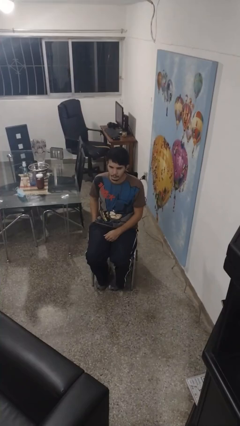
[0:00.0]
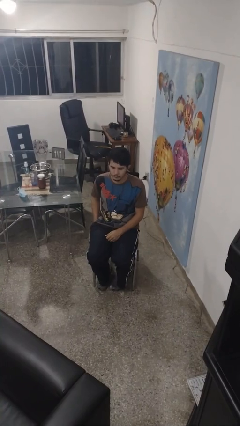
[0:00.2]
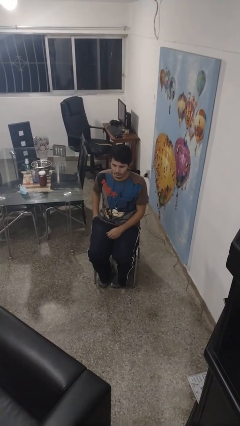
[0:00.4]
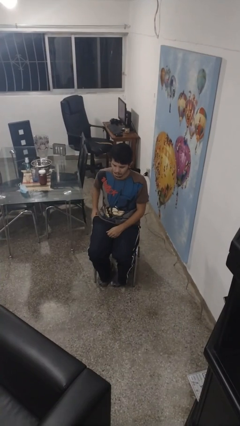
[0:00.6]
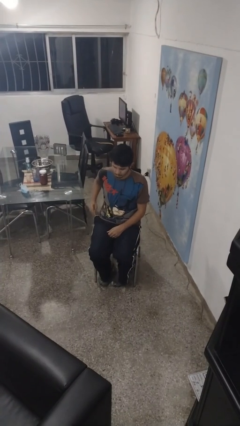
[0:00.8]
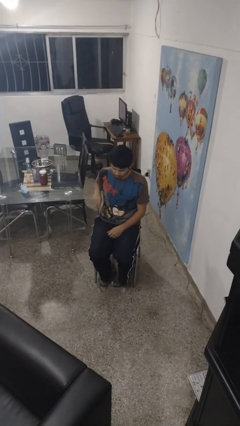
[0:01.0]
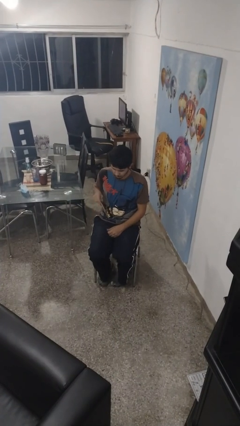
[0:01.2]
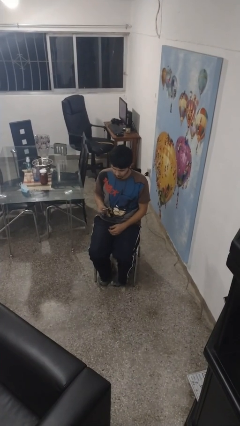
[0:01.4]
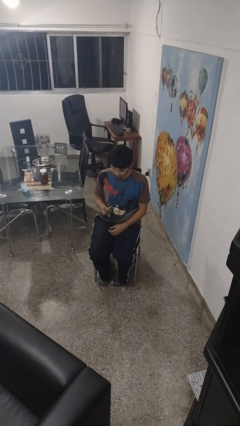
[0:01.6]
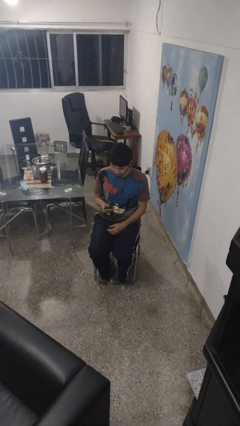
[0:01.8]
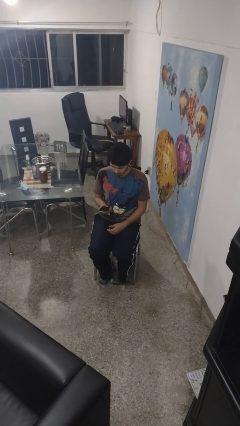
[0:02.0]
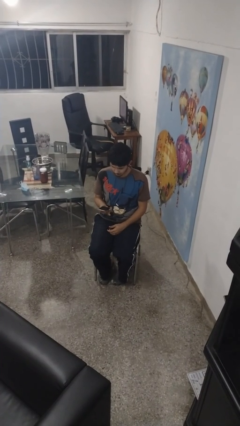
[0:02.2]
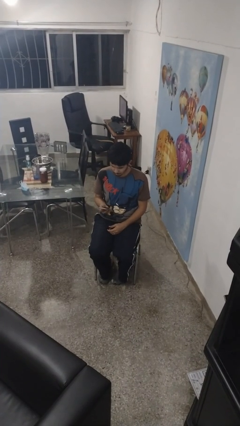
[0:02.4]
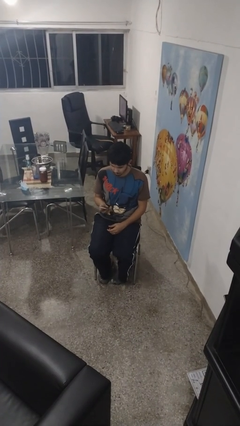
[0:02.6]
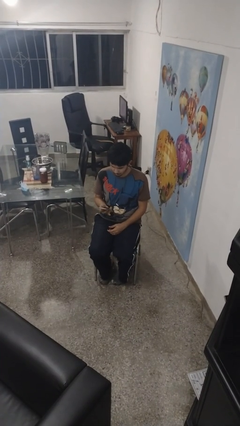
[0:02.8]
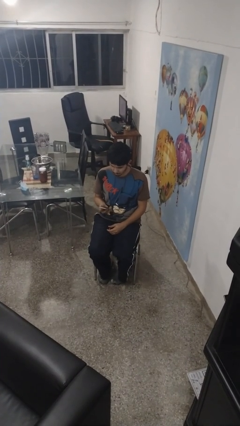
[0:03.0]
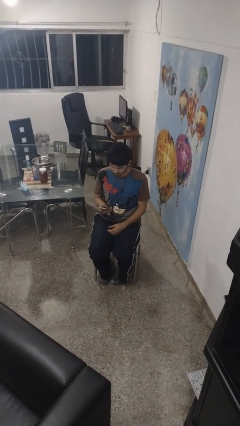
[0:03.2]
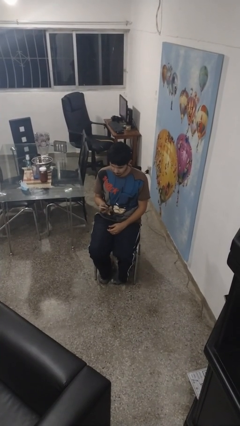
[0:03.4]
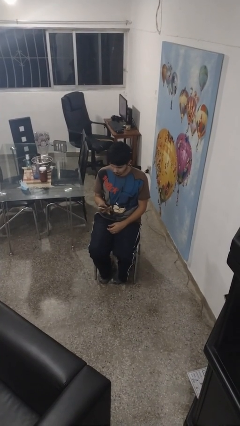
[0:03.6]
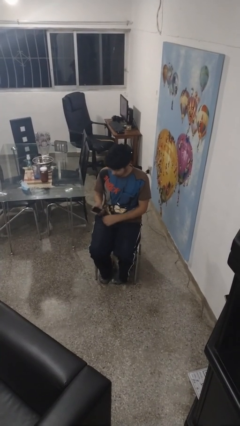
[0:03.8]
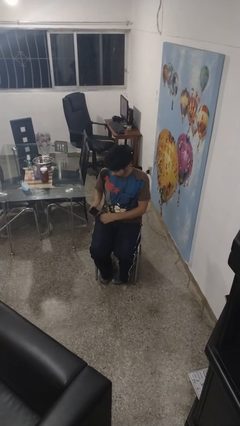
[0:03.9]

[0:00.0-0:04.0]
person takes phone from pocket

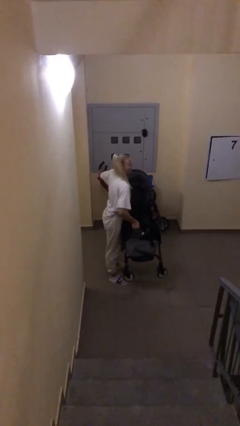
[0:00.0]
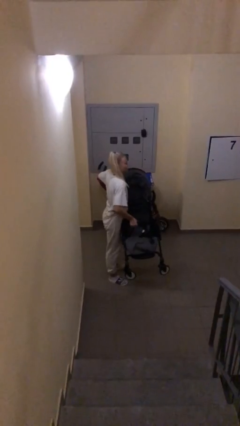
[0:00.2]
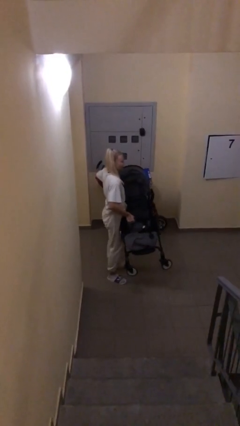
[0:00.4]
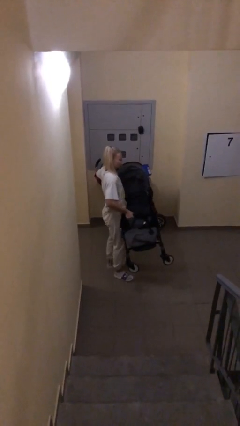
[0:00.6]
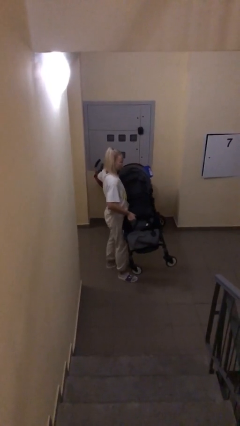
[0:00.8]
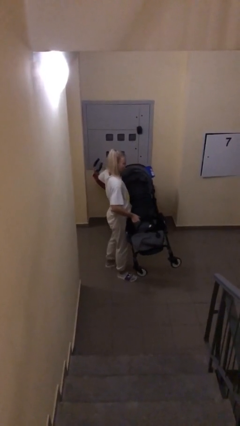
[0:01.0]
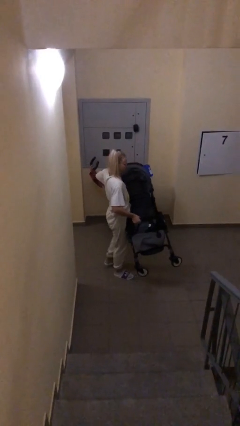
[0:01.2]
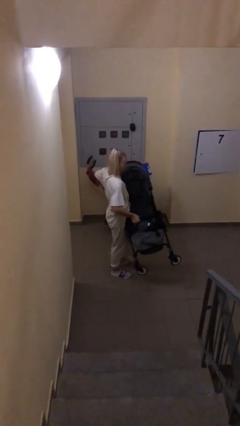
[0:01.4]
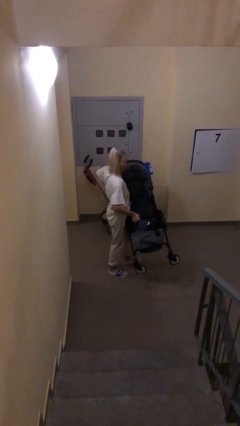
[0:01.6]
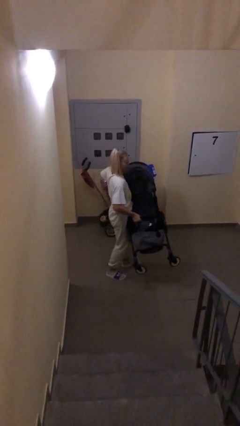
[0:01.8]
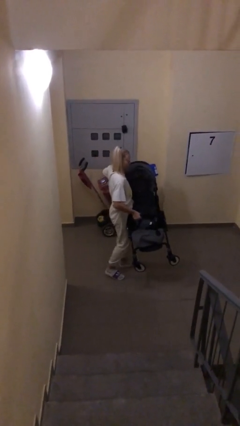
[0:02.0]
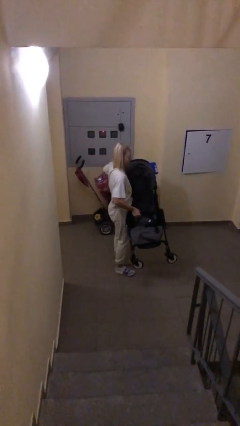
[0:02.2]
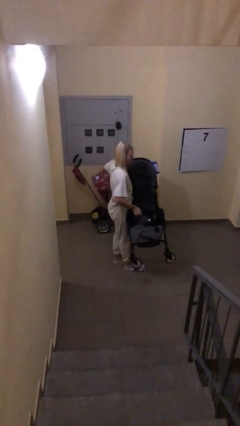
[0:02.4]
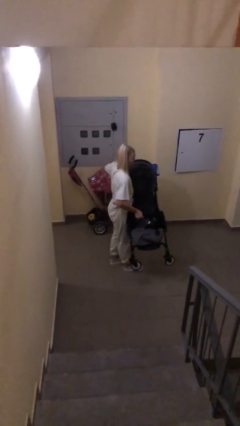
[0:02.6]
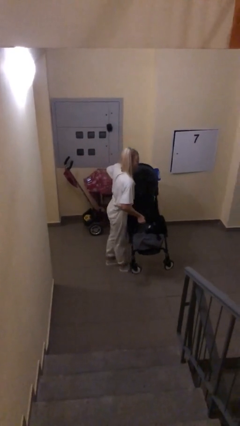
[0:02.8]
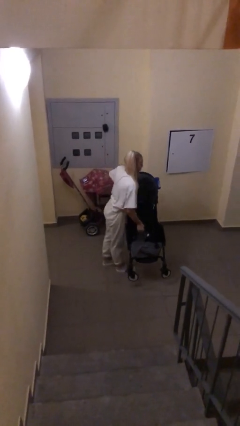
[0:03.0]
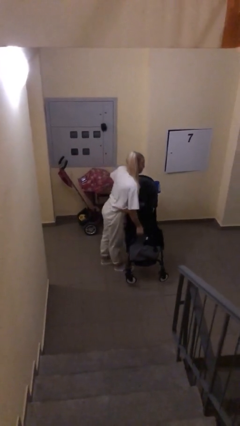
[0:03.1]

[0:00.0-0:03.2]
person carries heavy object

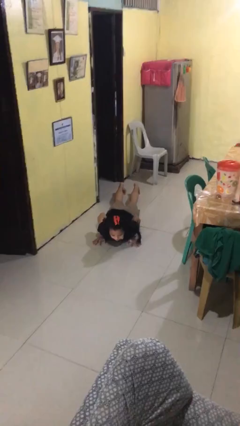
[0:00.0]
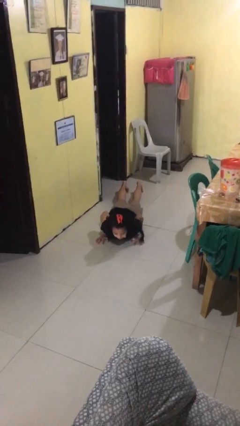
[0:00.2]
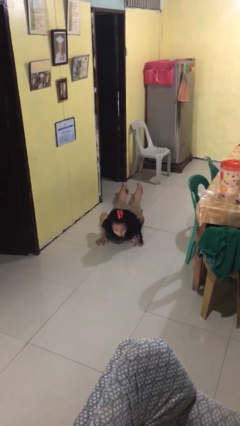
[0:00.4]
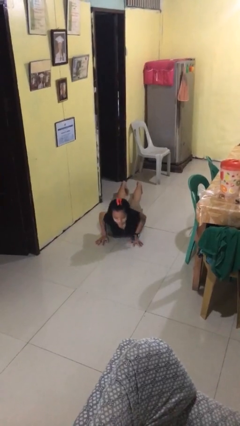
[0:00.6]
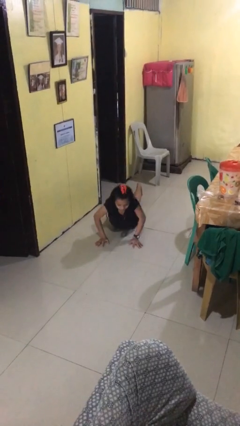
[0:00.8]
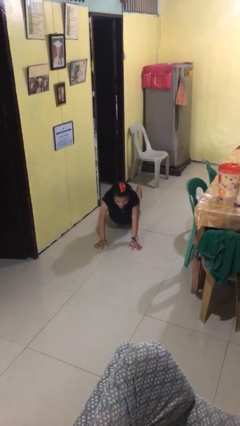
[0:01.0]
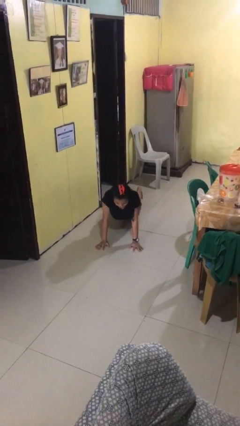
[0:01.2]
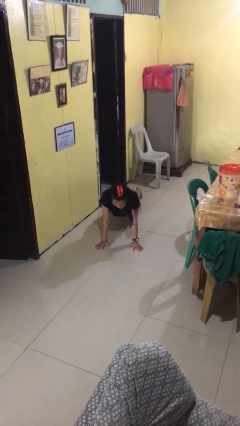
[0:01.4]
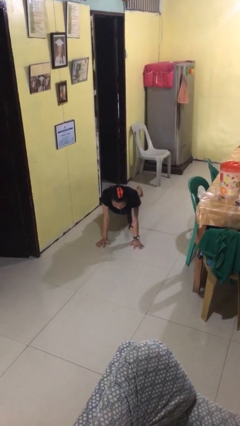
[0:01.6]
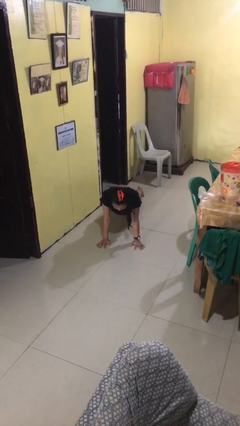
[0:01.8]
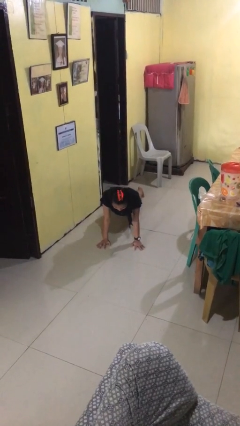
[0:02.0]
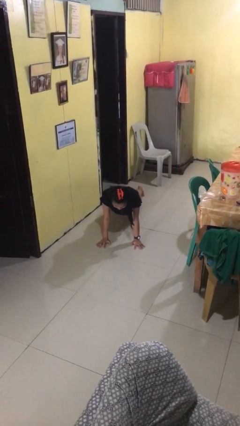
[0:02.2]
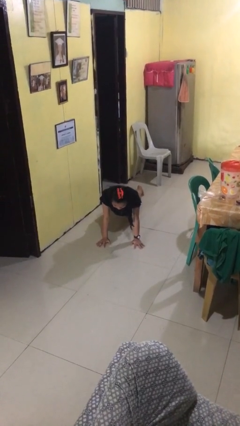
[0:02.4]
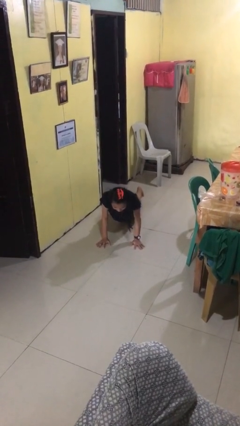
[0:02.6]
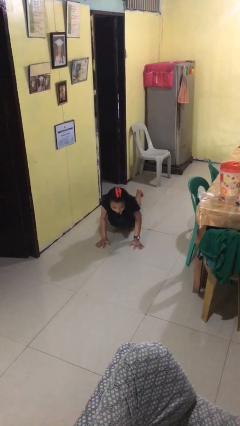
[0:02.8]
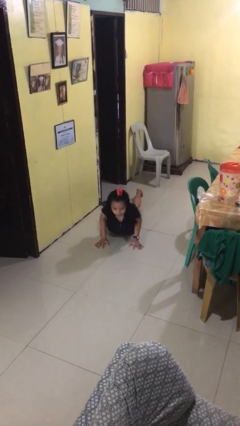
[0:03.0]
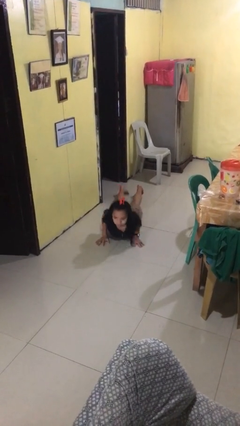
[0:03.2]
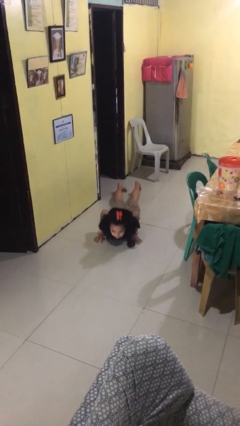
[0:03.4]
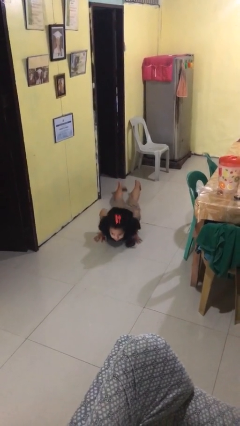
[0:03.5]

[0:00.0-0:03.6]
person exercises with pushup

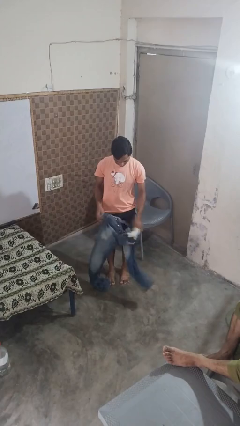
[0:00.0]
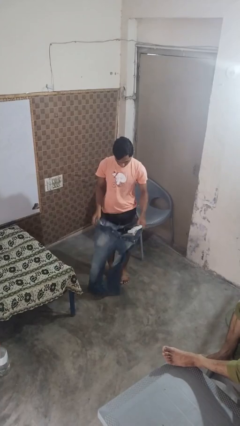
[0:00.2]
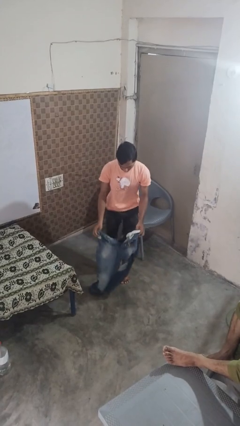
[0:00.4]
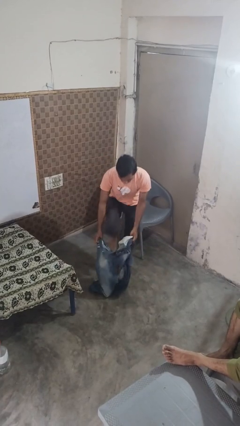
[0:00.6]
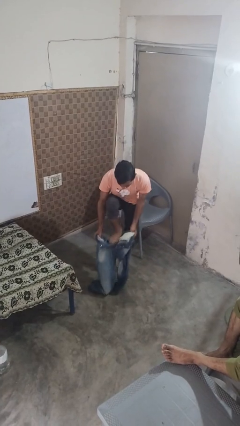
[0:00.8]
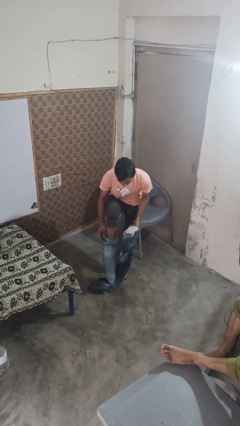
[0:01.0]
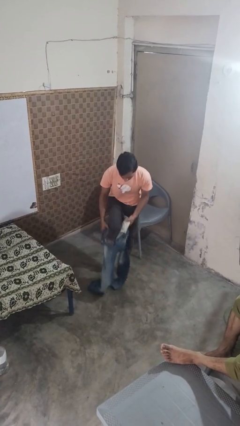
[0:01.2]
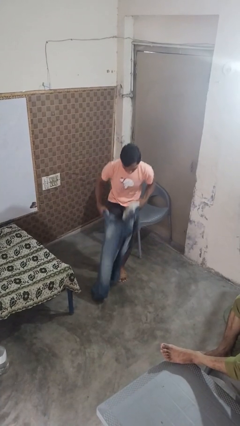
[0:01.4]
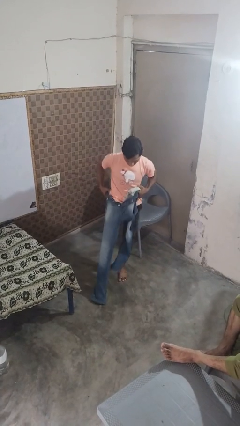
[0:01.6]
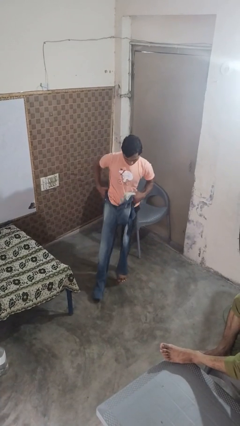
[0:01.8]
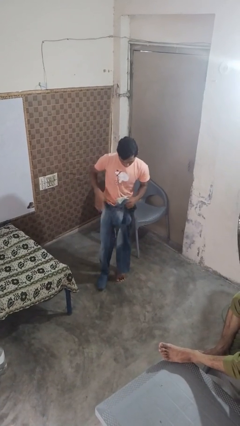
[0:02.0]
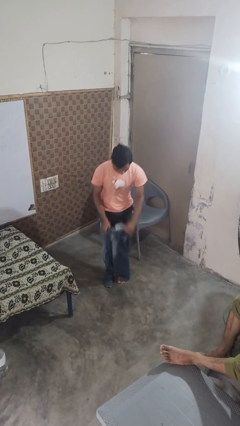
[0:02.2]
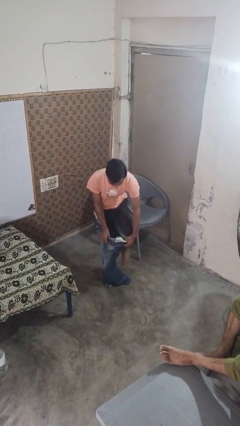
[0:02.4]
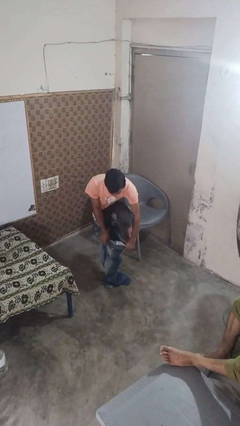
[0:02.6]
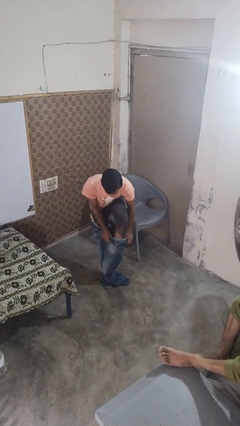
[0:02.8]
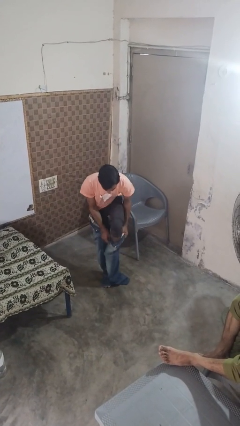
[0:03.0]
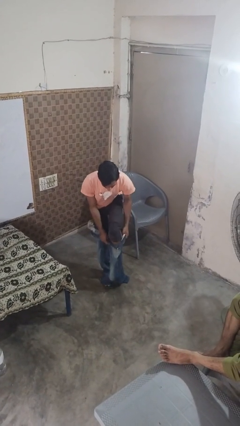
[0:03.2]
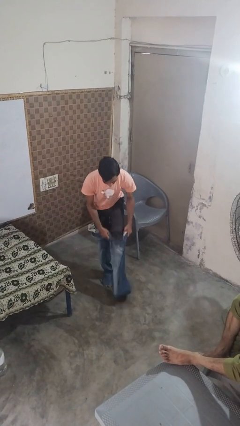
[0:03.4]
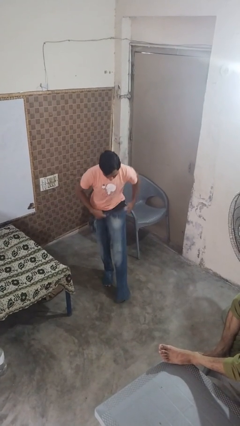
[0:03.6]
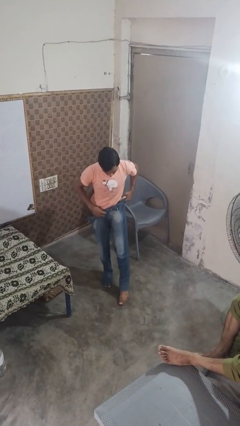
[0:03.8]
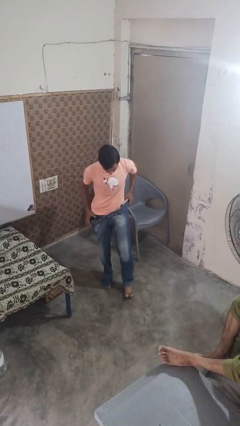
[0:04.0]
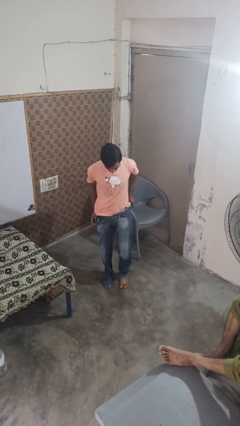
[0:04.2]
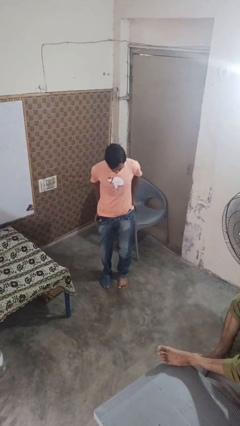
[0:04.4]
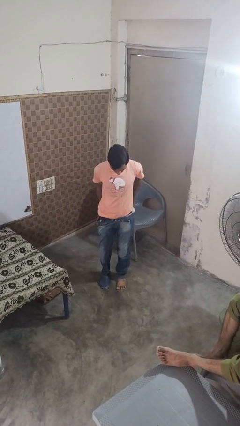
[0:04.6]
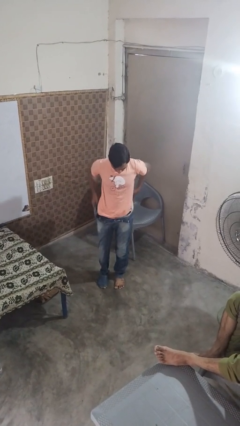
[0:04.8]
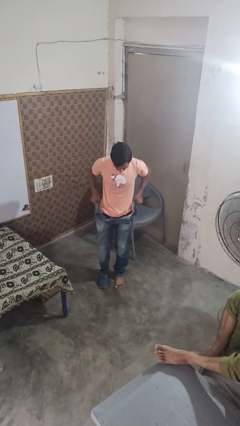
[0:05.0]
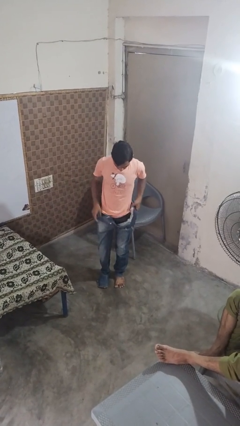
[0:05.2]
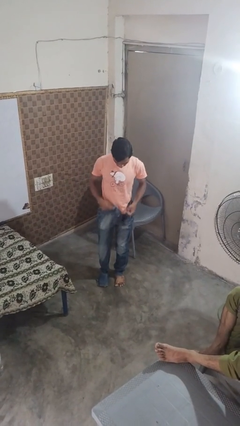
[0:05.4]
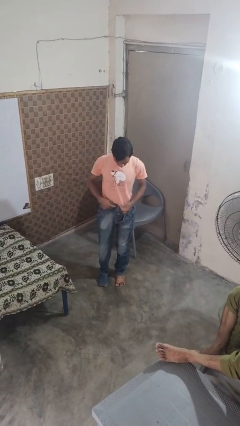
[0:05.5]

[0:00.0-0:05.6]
person puts on pants

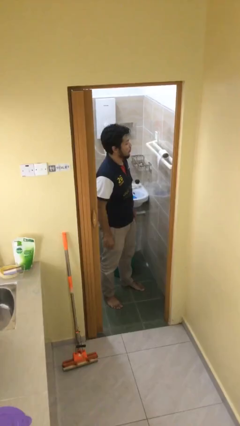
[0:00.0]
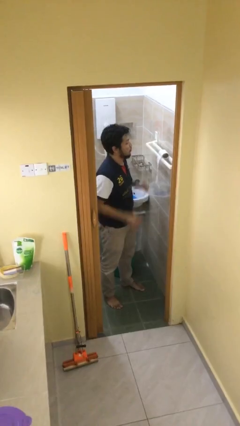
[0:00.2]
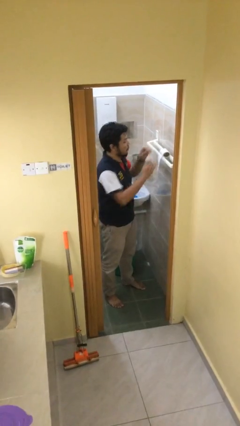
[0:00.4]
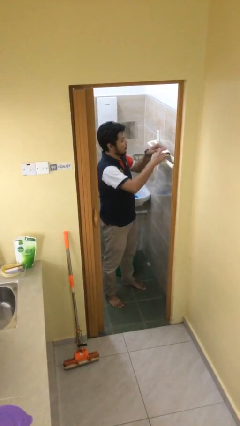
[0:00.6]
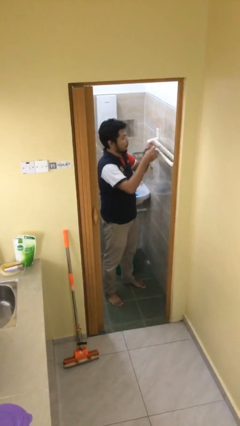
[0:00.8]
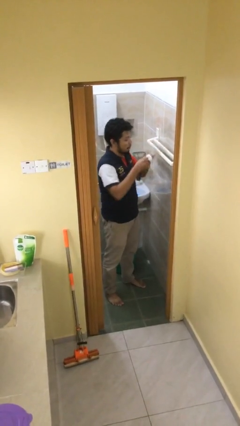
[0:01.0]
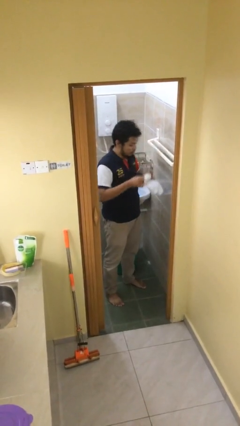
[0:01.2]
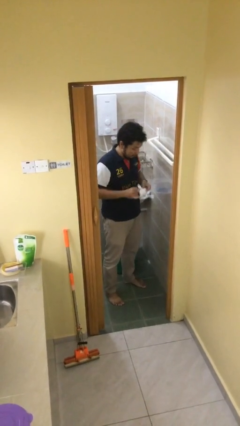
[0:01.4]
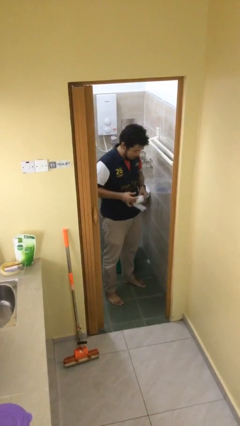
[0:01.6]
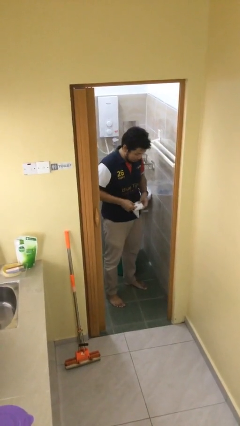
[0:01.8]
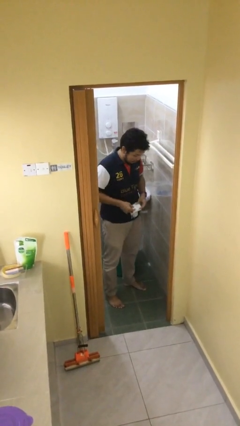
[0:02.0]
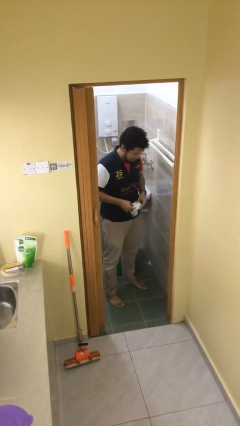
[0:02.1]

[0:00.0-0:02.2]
person picks up object from countertop
